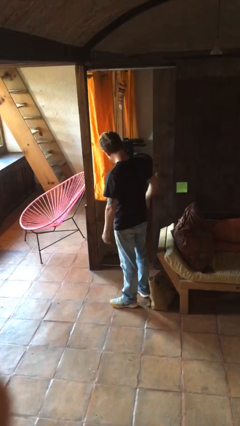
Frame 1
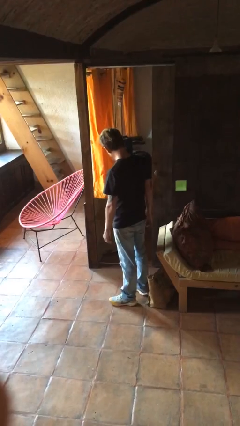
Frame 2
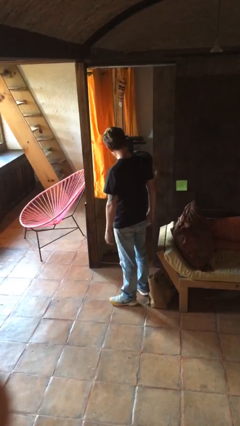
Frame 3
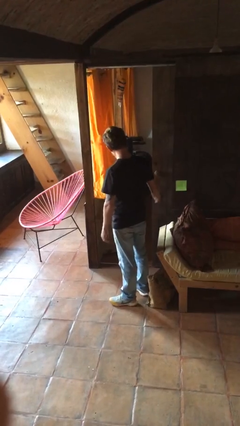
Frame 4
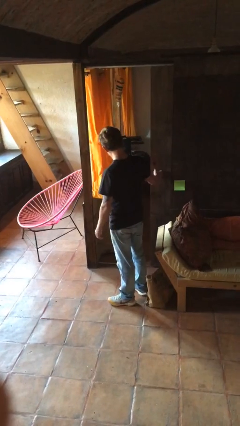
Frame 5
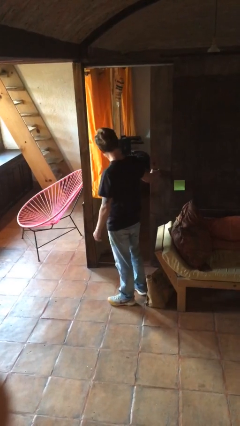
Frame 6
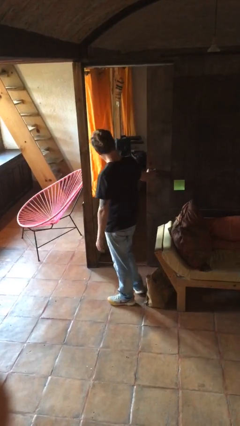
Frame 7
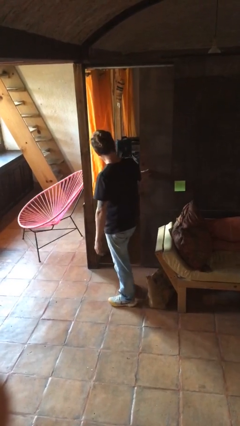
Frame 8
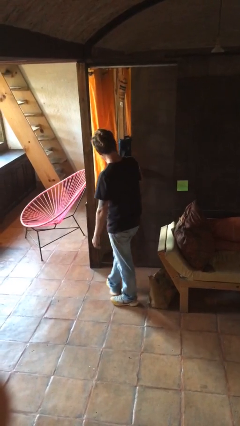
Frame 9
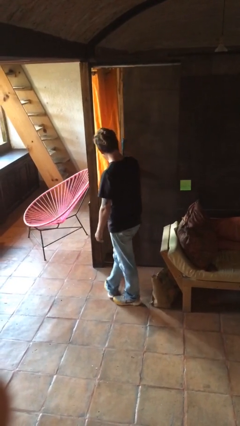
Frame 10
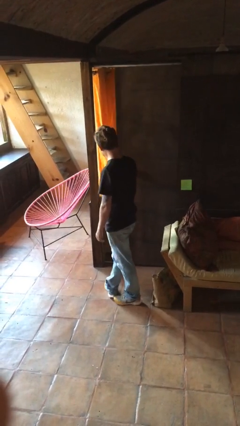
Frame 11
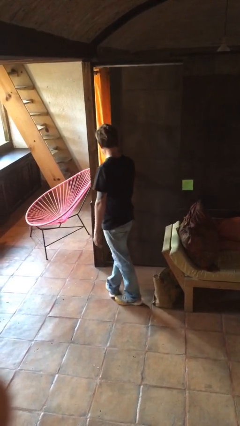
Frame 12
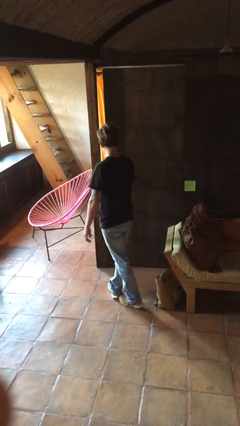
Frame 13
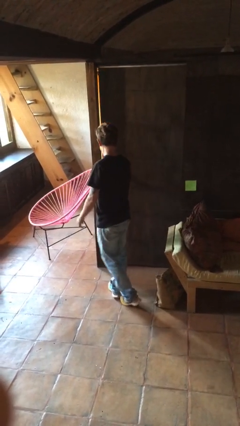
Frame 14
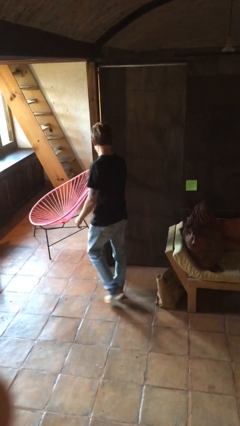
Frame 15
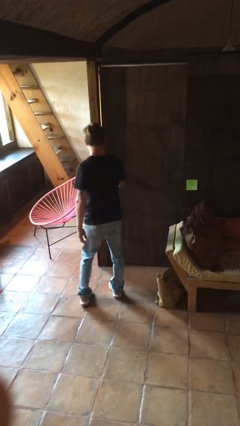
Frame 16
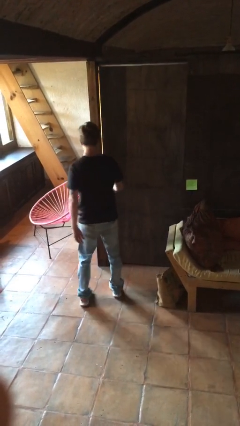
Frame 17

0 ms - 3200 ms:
person closes sliding door

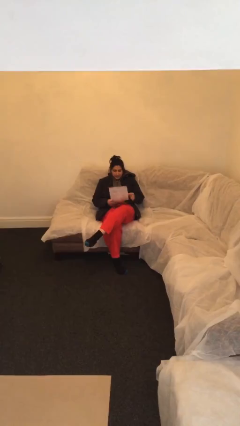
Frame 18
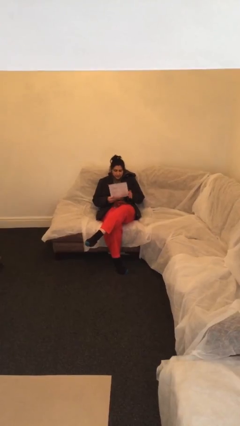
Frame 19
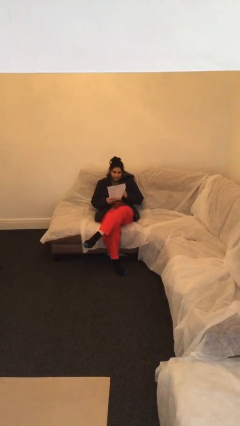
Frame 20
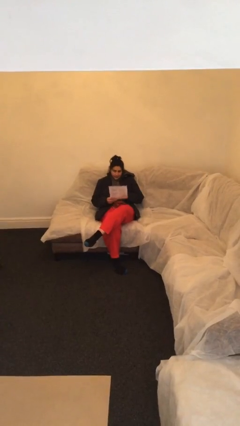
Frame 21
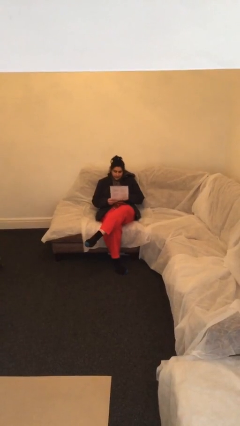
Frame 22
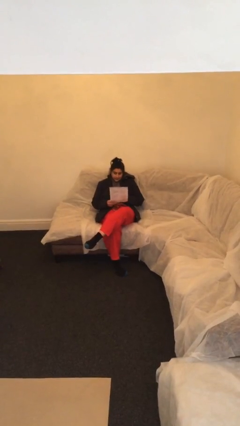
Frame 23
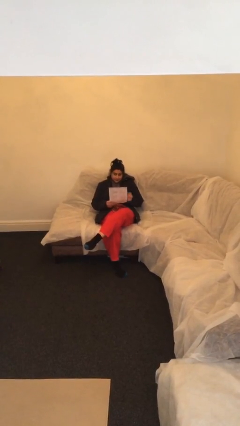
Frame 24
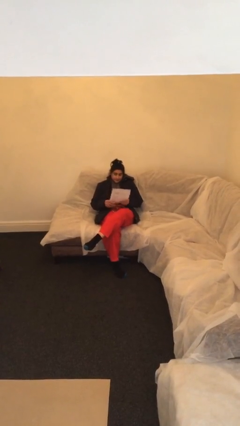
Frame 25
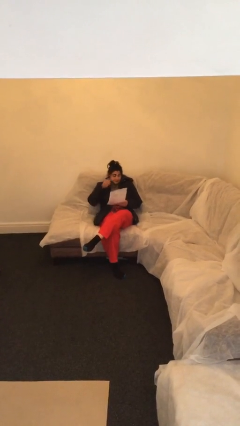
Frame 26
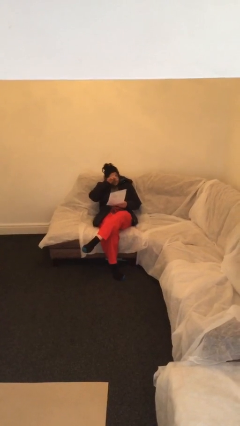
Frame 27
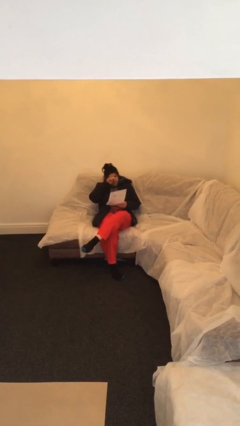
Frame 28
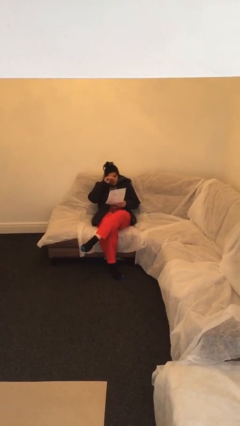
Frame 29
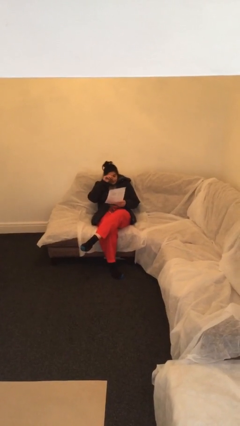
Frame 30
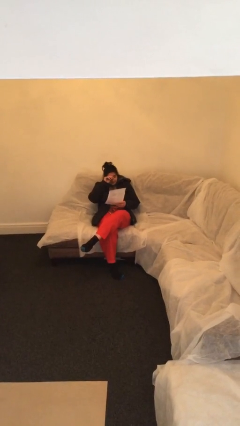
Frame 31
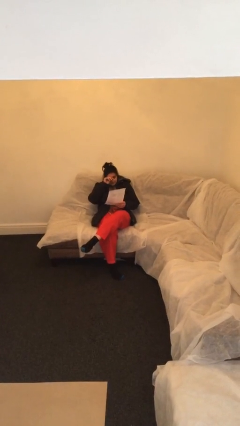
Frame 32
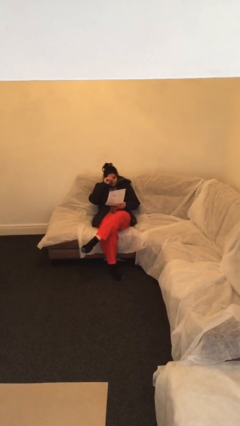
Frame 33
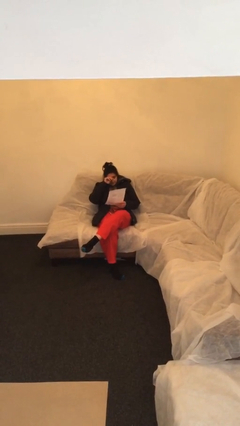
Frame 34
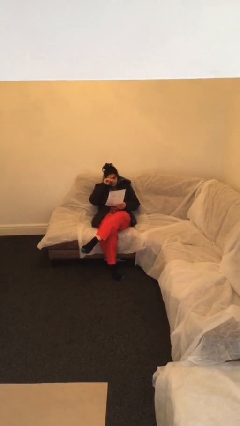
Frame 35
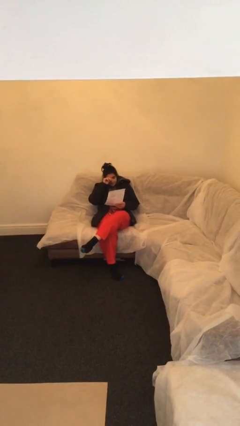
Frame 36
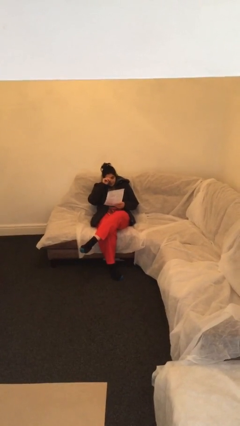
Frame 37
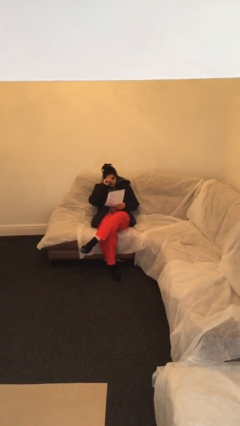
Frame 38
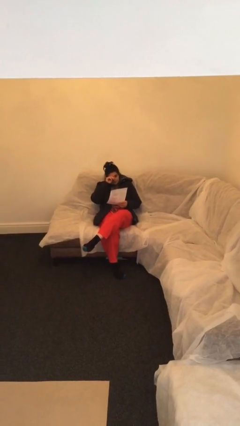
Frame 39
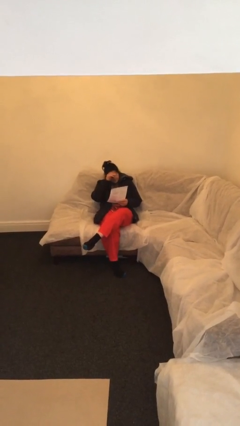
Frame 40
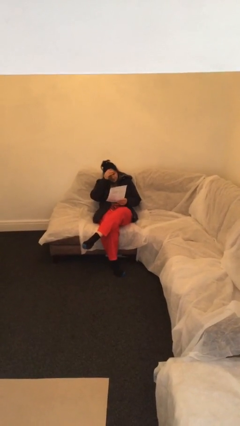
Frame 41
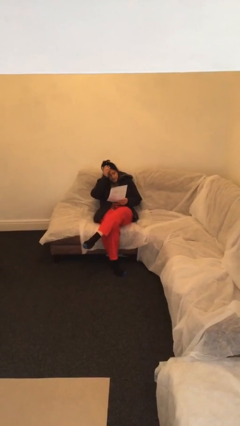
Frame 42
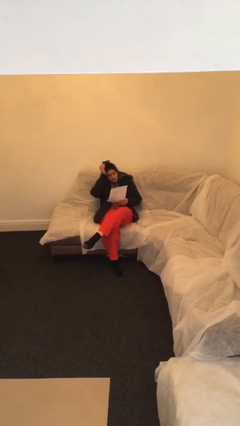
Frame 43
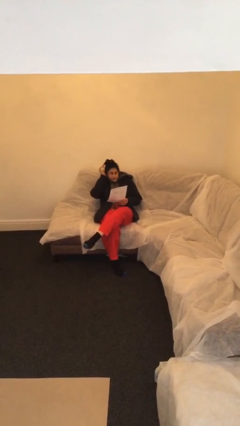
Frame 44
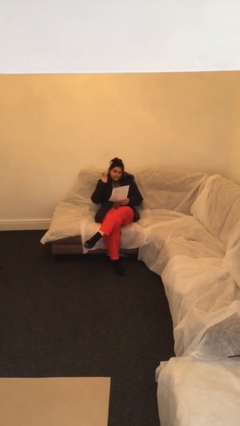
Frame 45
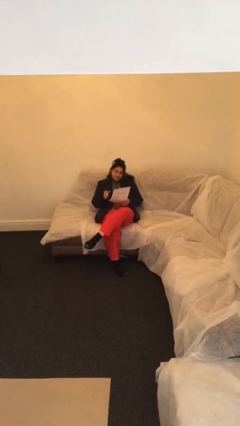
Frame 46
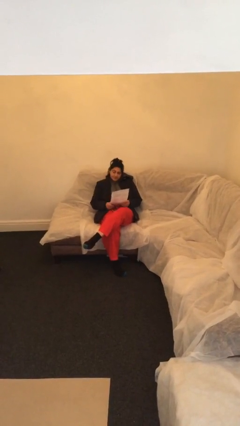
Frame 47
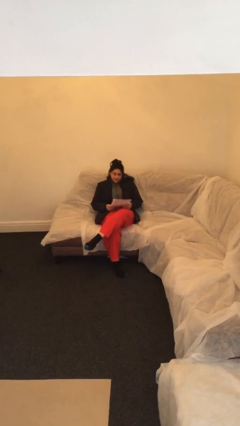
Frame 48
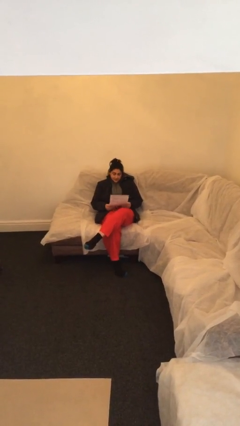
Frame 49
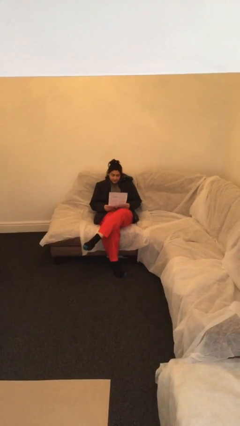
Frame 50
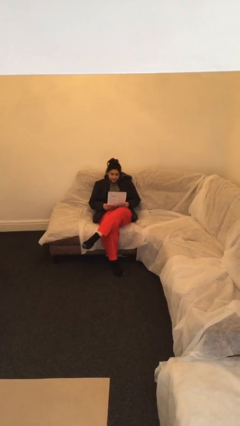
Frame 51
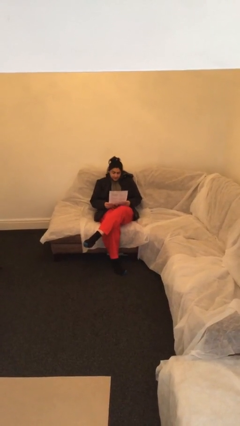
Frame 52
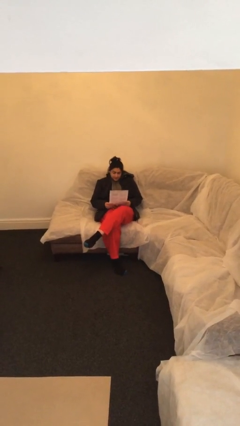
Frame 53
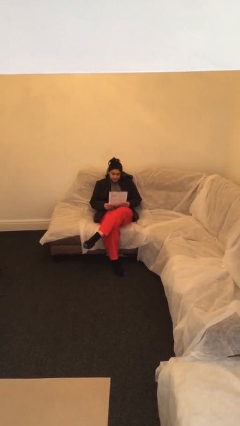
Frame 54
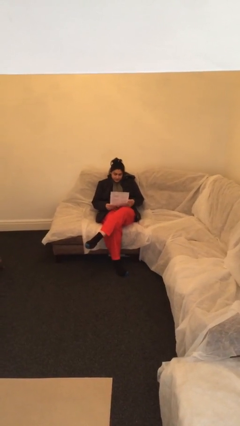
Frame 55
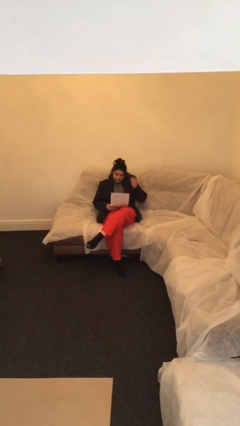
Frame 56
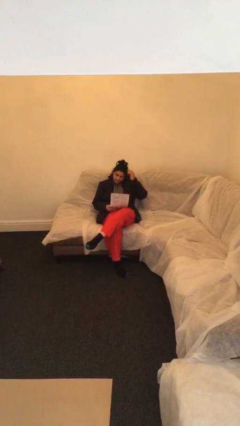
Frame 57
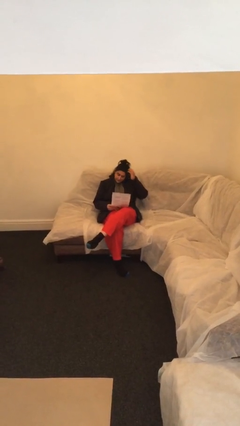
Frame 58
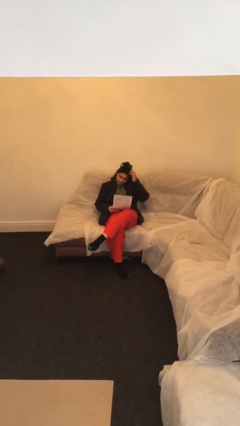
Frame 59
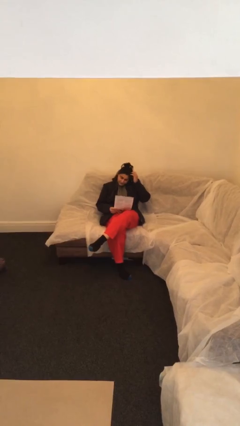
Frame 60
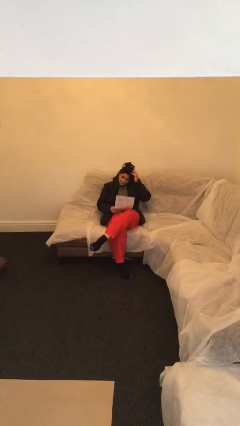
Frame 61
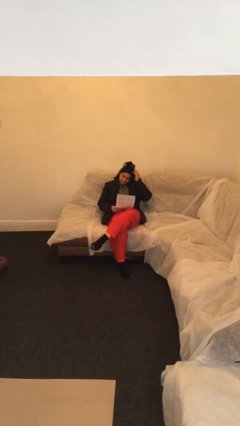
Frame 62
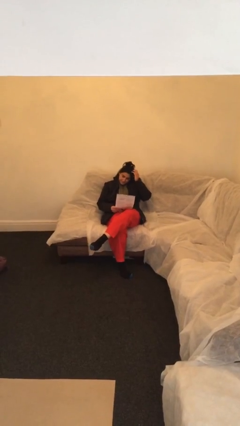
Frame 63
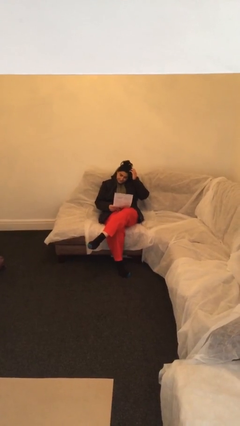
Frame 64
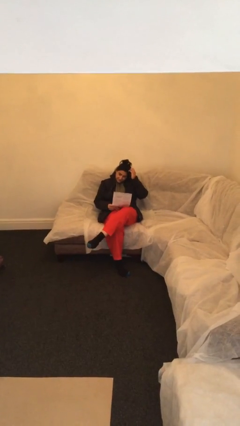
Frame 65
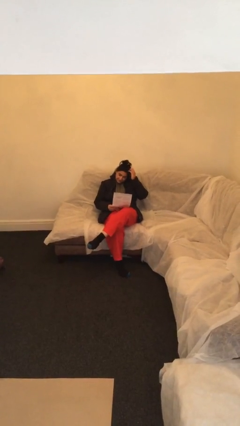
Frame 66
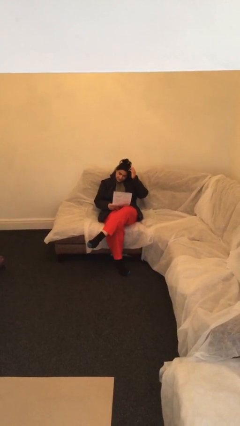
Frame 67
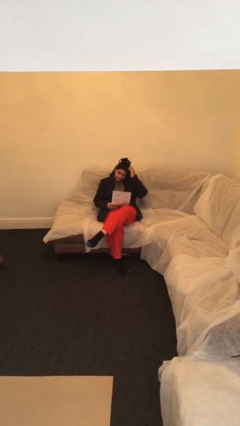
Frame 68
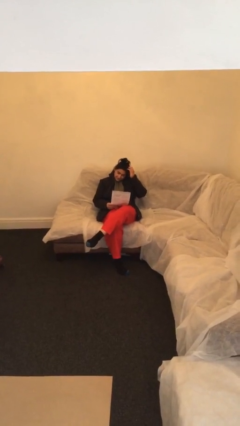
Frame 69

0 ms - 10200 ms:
person reads document

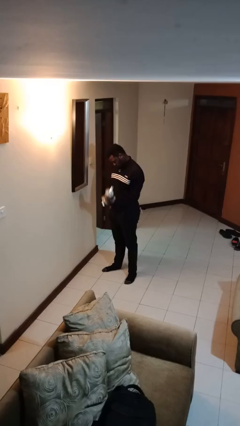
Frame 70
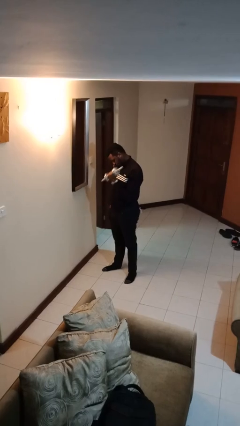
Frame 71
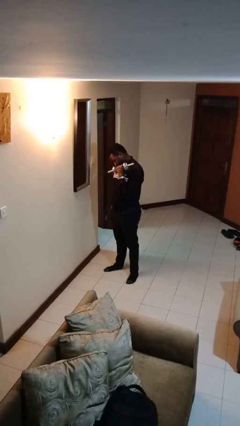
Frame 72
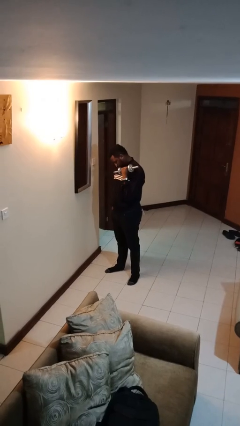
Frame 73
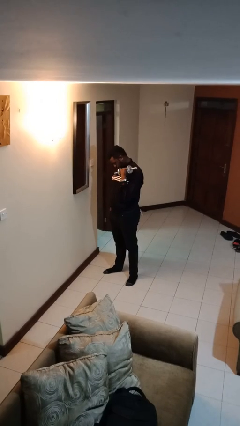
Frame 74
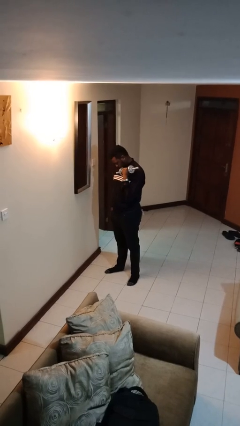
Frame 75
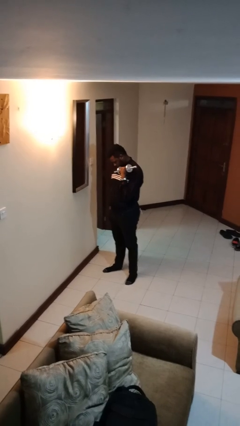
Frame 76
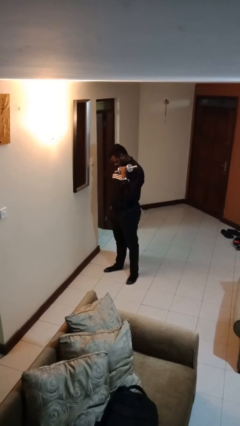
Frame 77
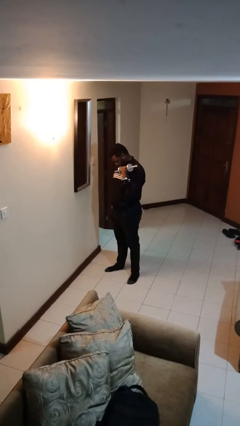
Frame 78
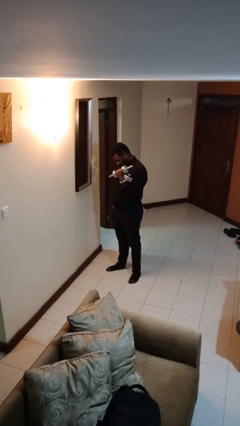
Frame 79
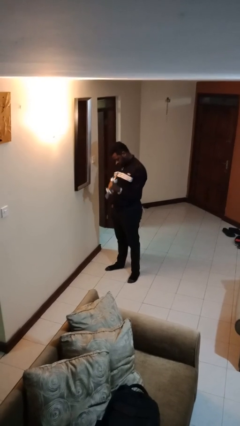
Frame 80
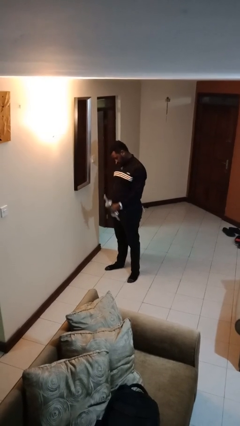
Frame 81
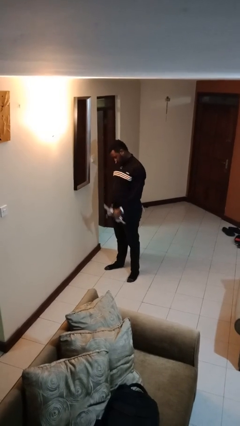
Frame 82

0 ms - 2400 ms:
person lifts dumbbells

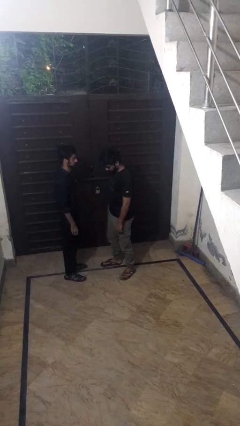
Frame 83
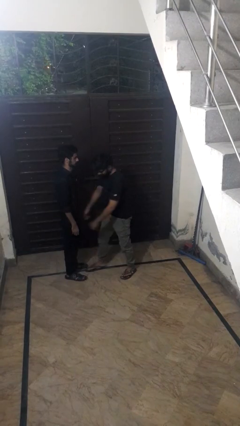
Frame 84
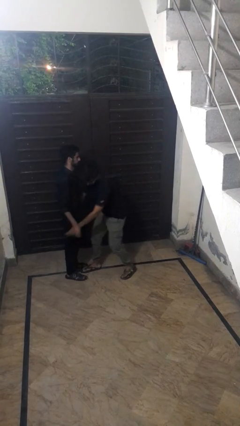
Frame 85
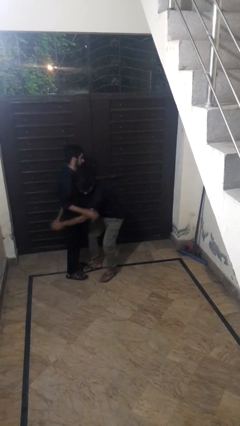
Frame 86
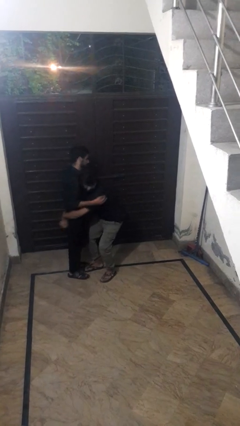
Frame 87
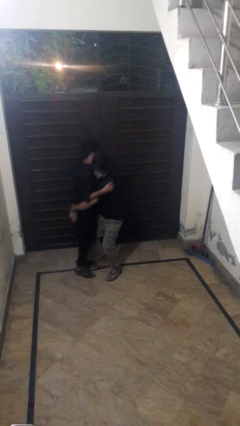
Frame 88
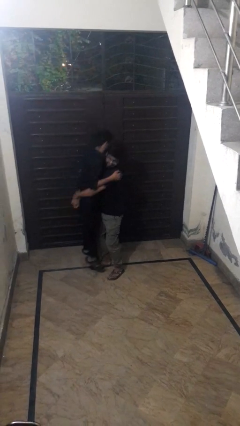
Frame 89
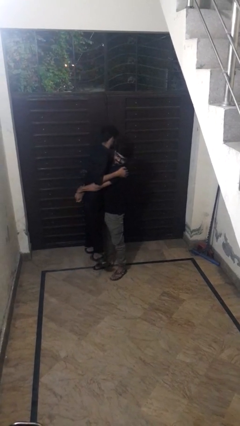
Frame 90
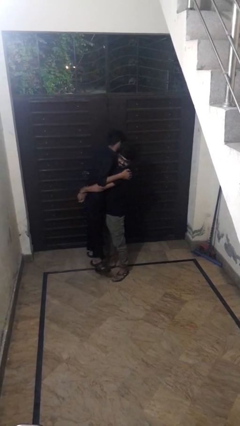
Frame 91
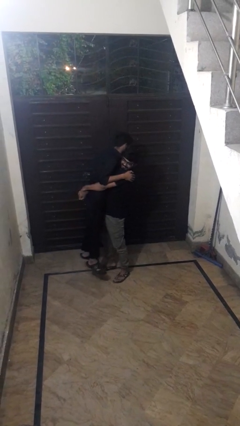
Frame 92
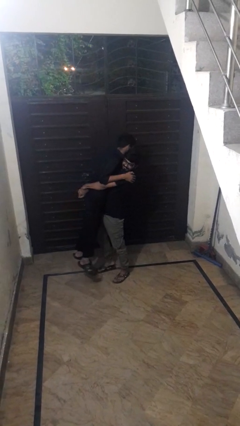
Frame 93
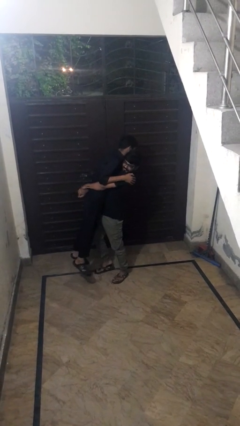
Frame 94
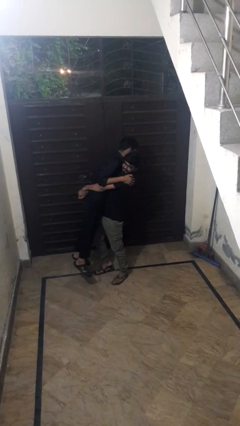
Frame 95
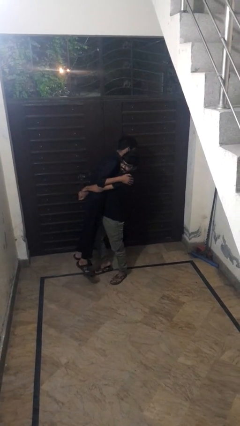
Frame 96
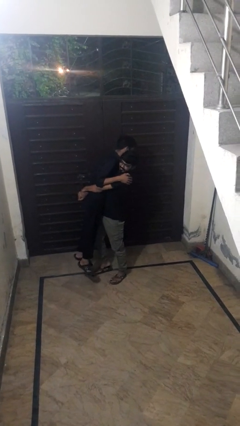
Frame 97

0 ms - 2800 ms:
person picks up person
